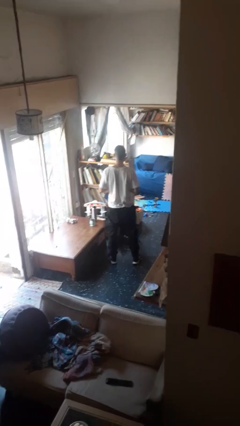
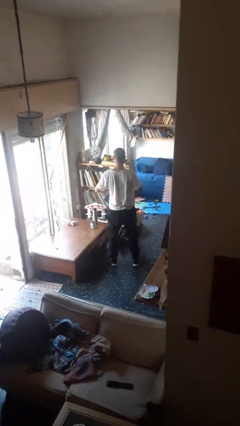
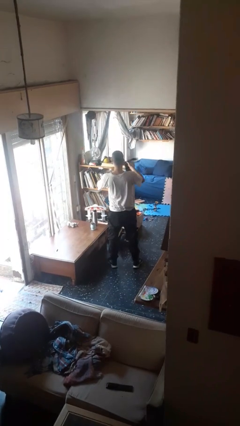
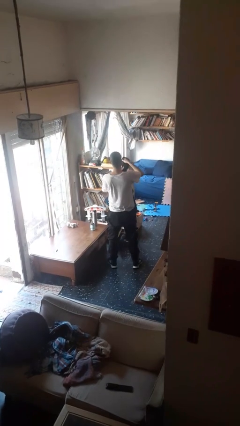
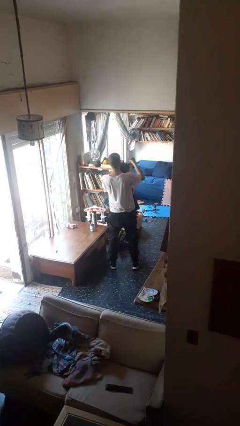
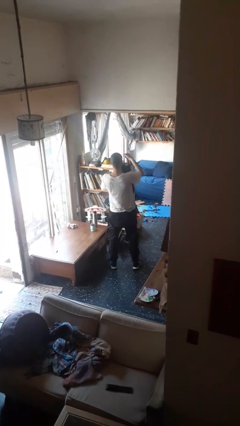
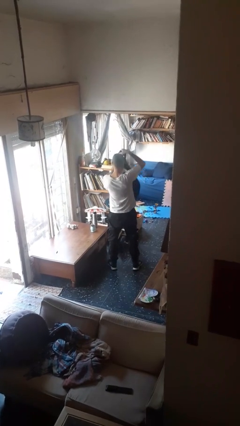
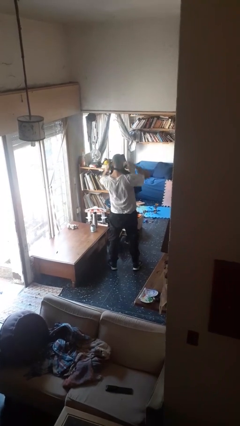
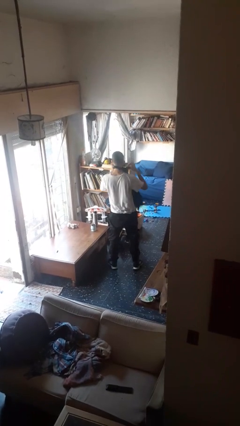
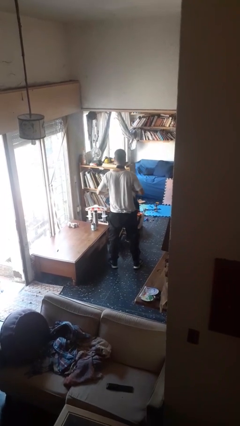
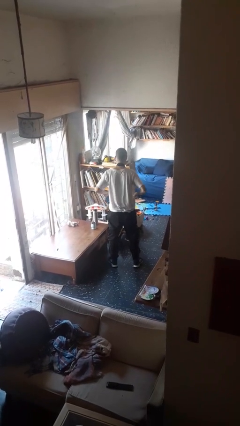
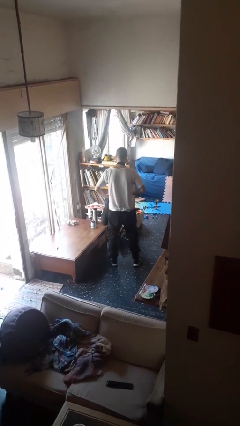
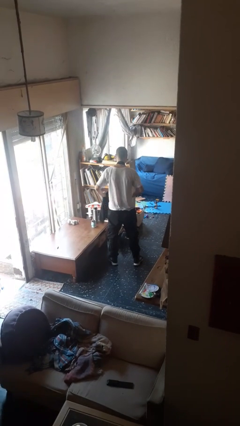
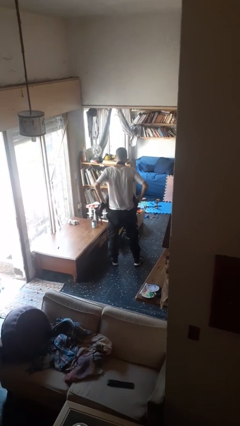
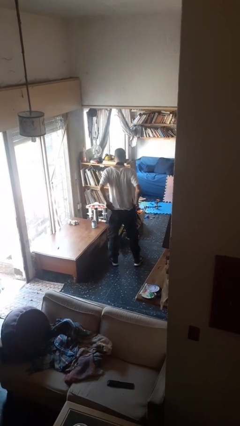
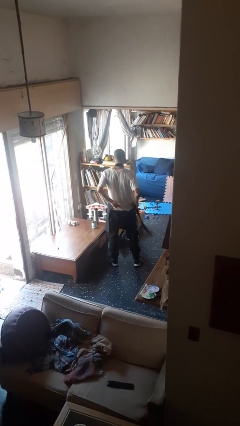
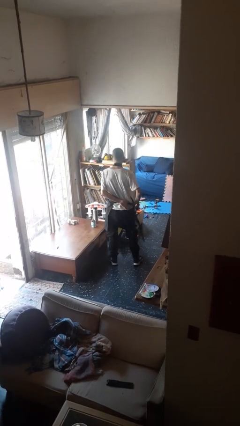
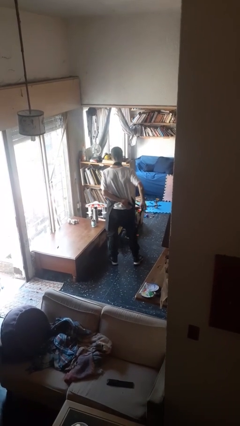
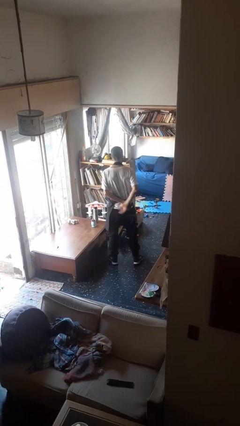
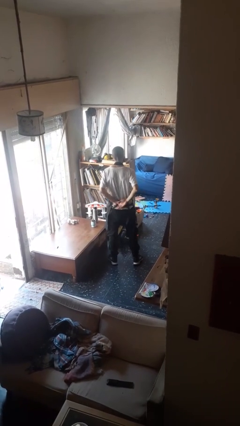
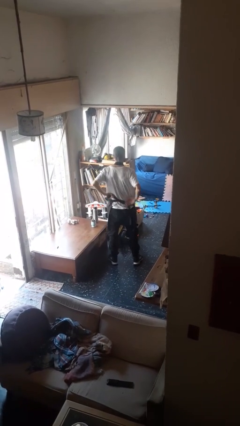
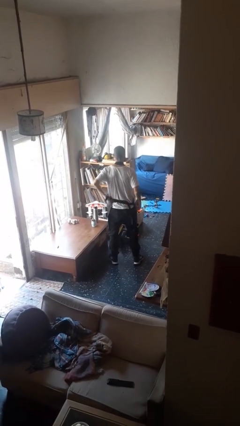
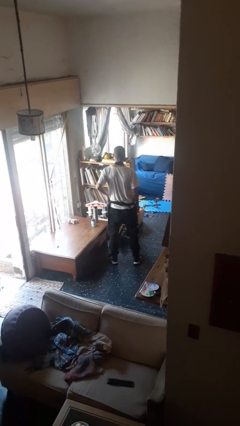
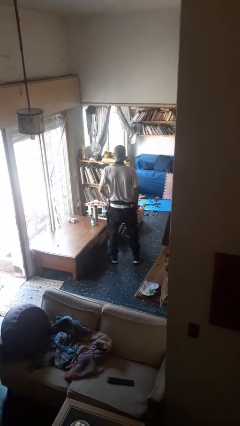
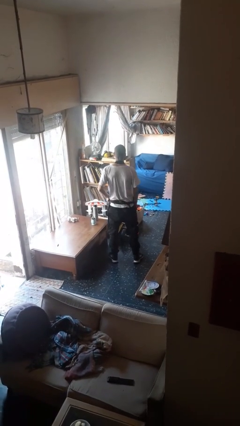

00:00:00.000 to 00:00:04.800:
person puts on apron

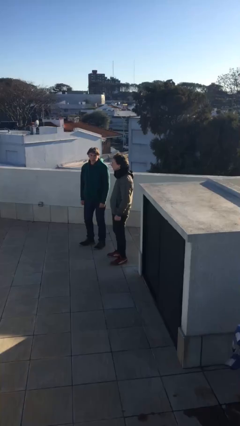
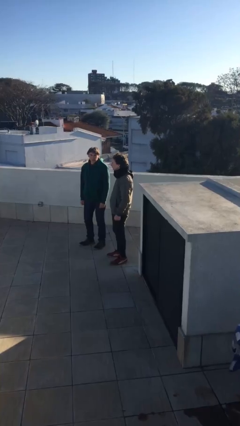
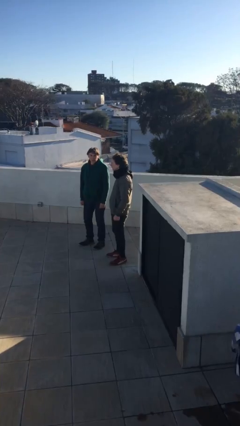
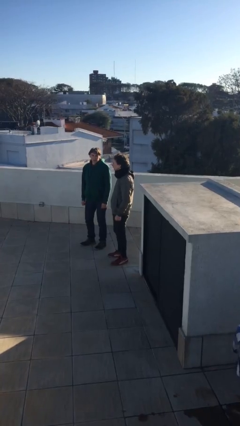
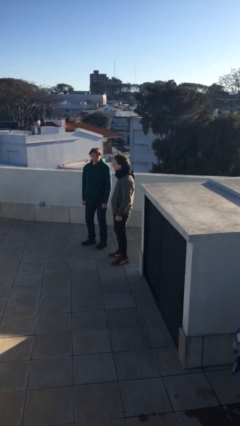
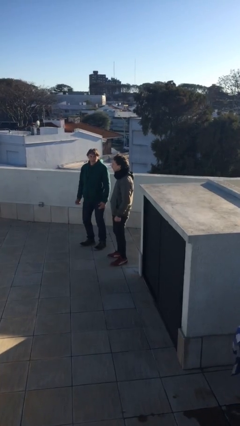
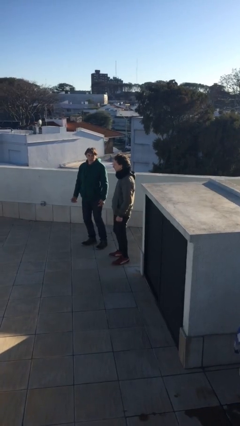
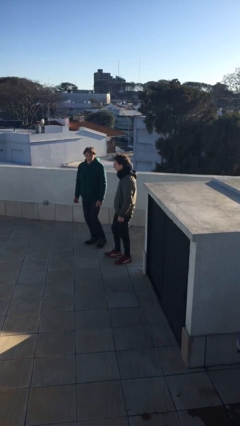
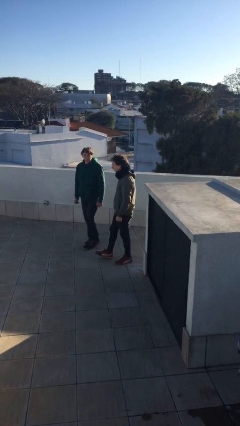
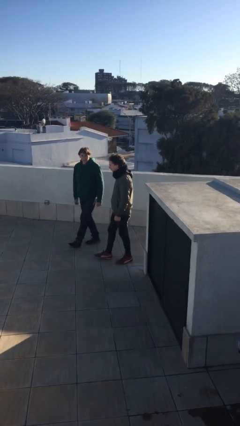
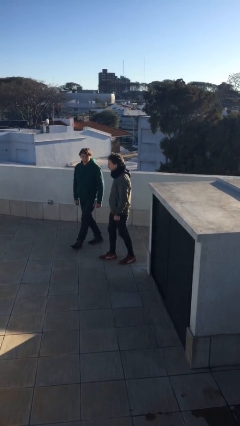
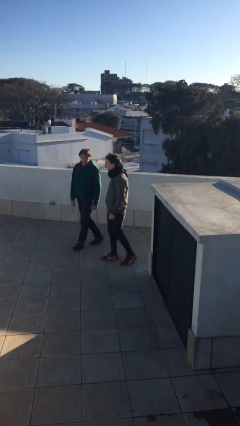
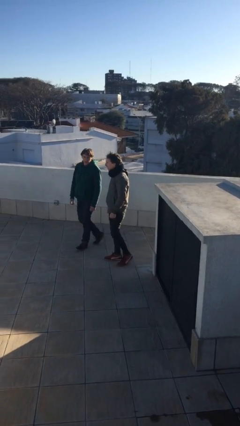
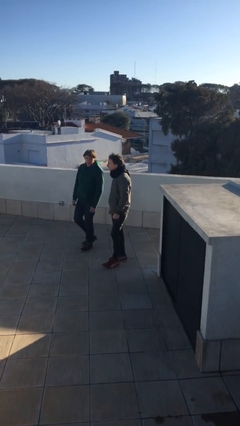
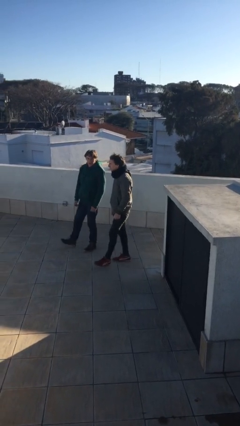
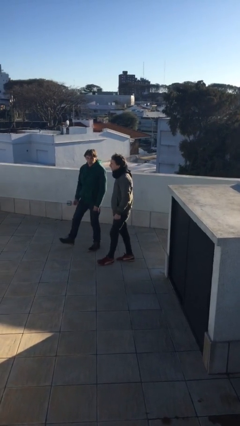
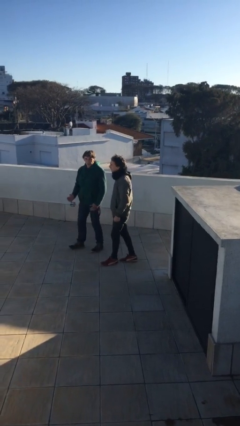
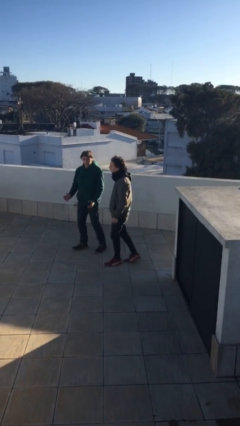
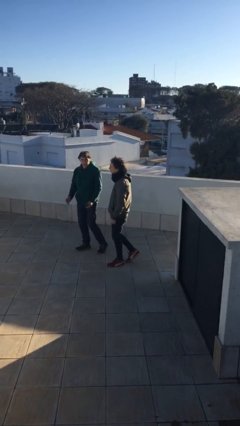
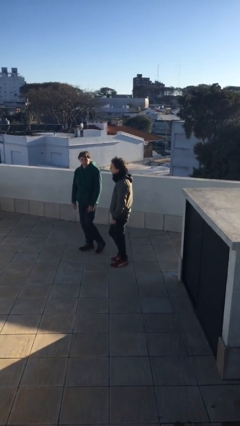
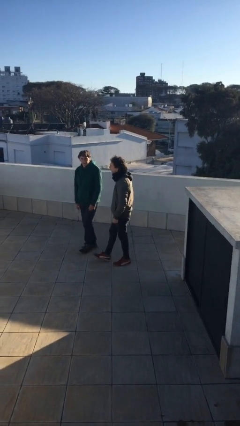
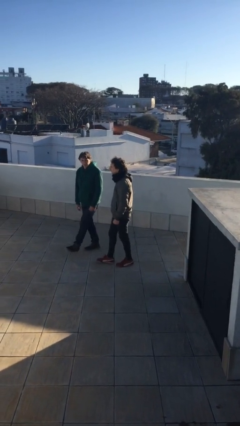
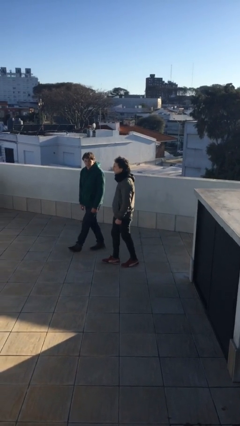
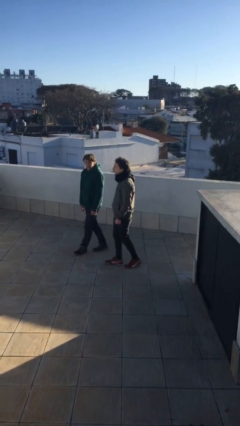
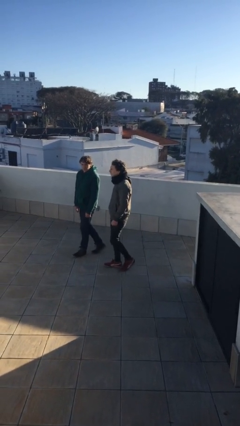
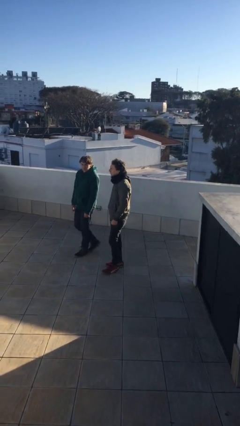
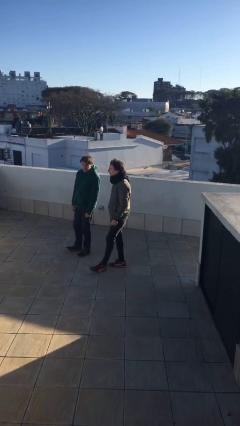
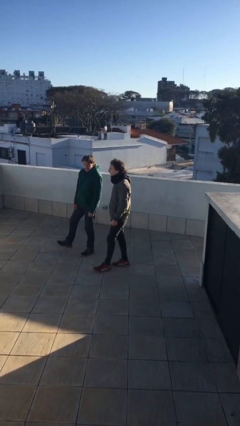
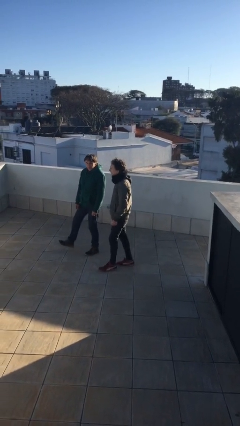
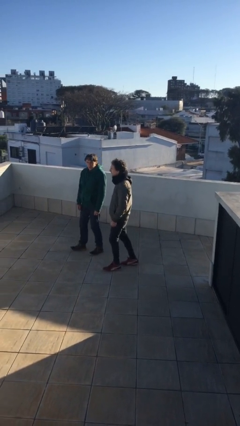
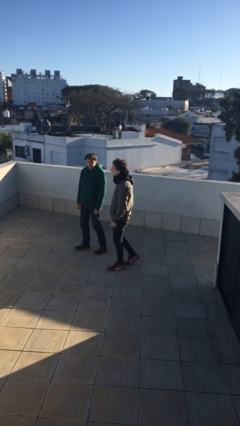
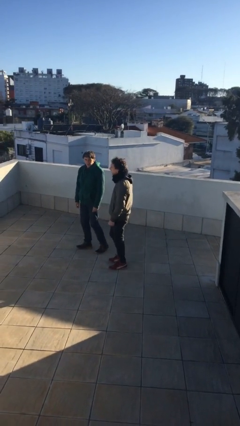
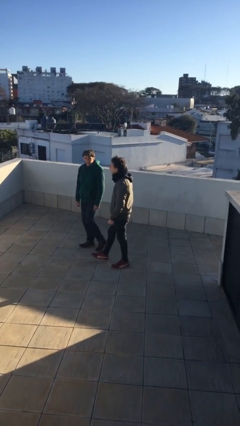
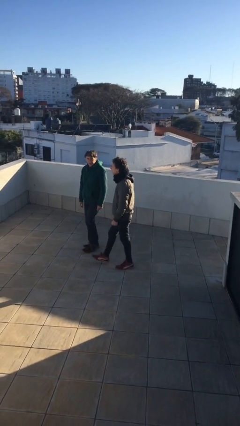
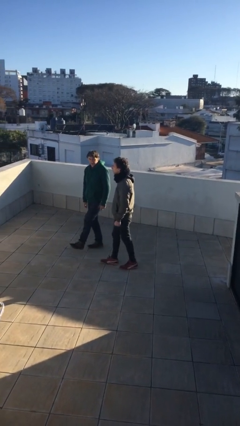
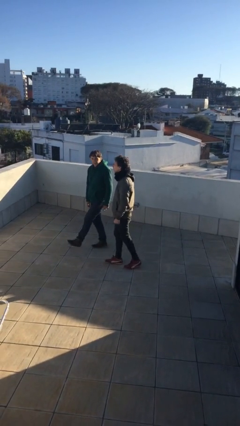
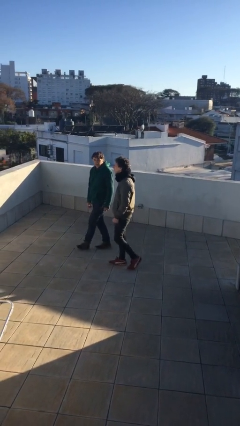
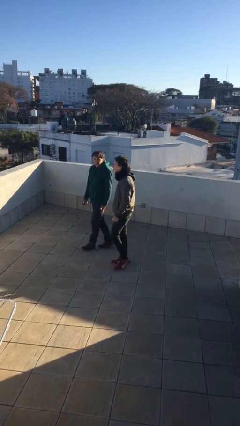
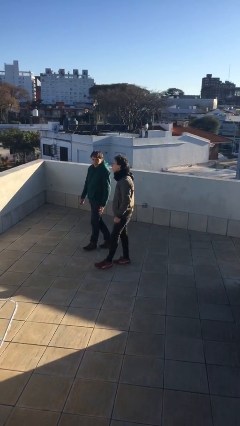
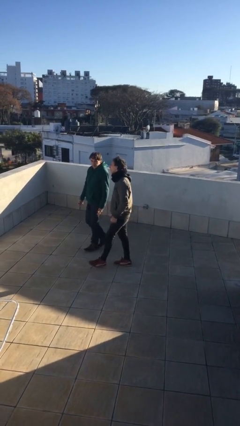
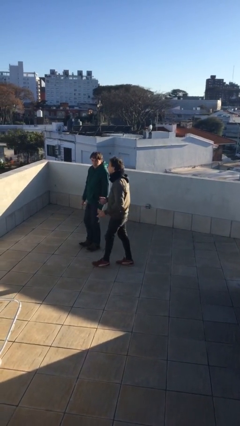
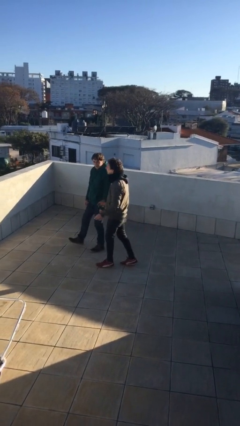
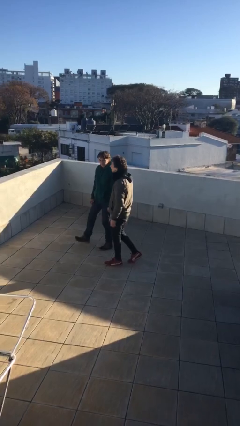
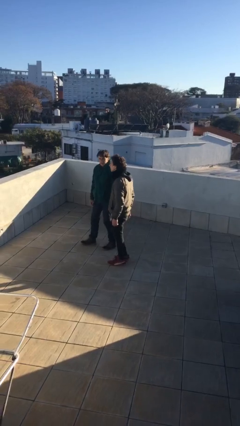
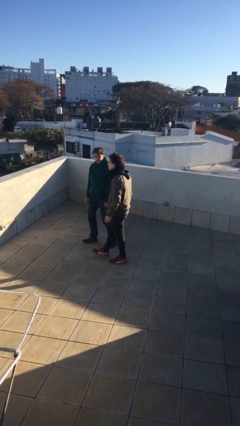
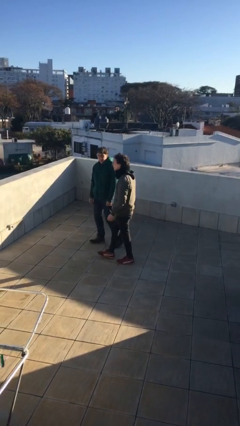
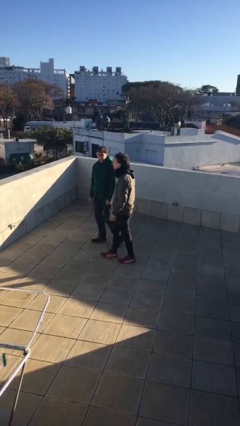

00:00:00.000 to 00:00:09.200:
person talks to person

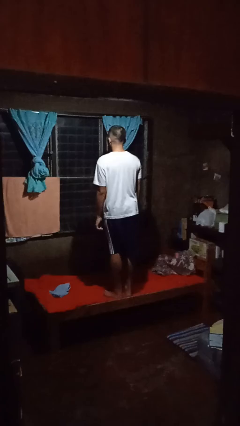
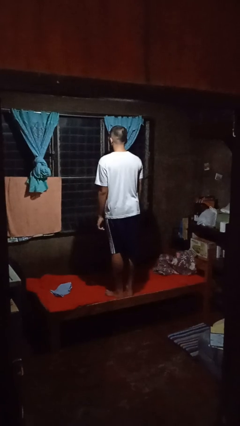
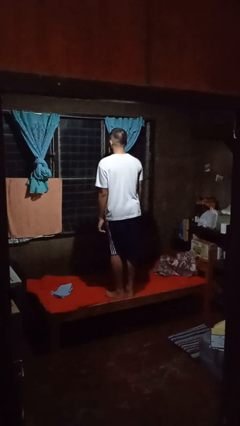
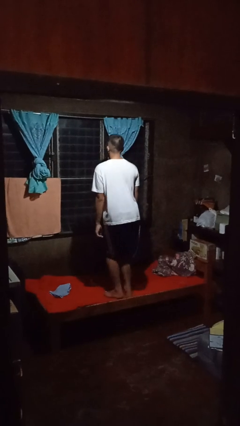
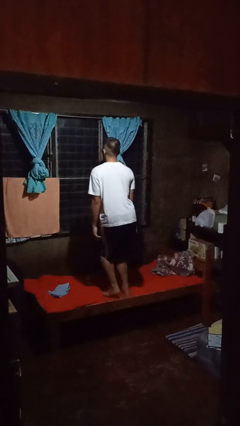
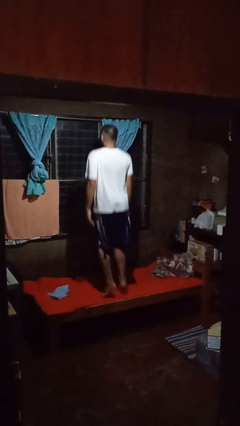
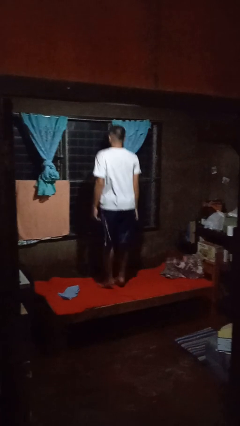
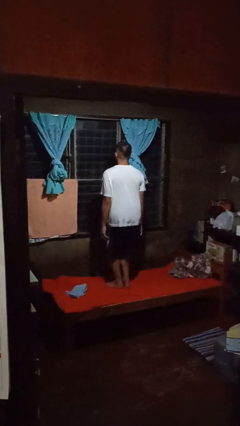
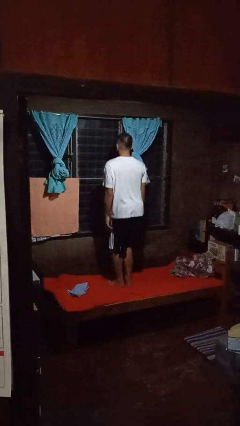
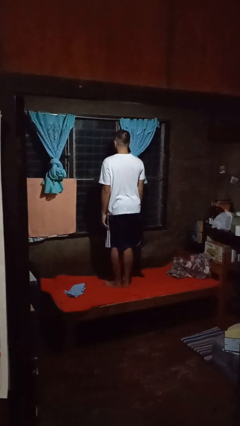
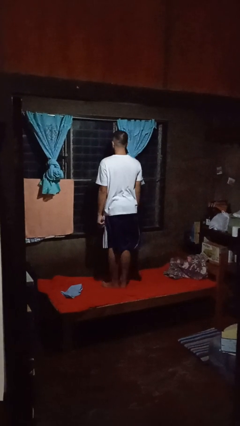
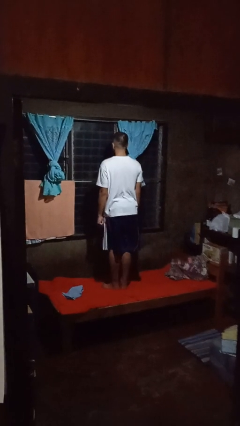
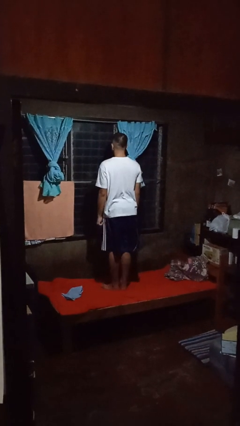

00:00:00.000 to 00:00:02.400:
person jumps on bed

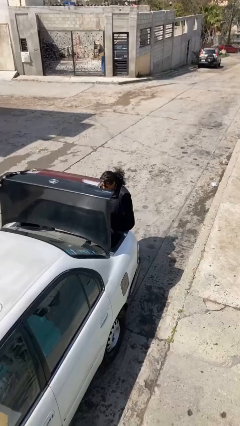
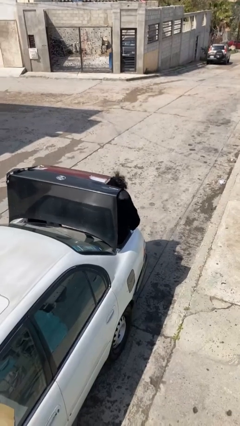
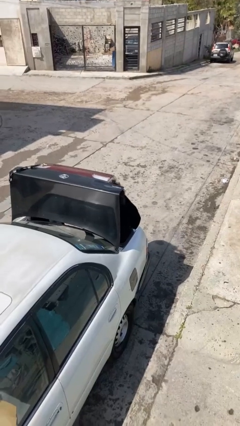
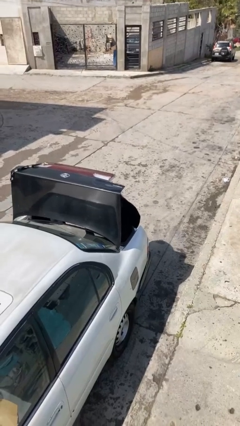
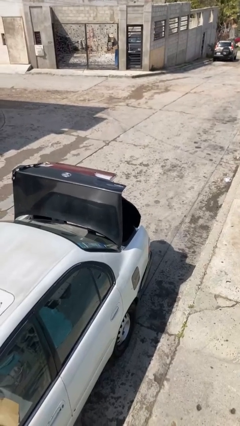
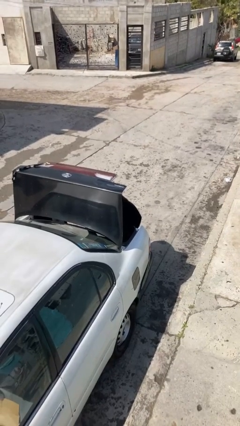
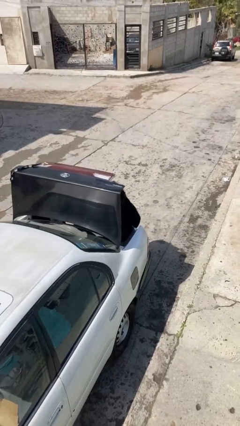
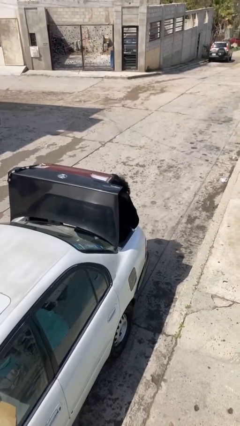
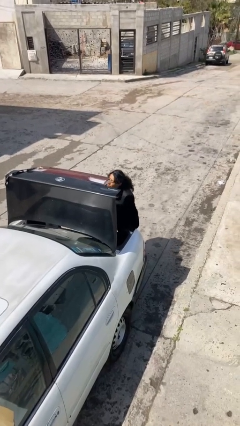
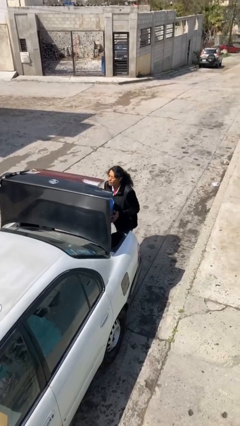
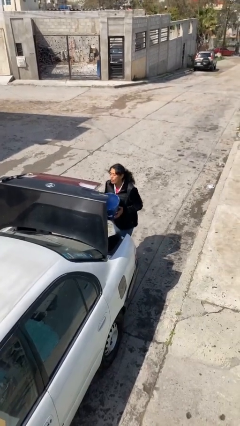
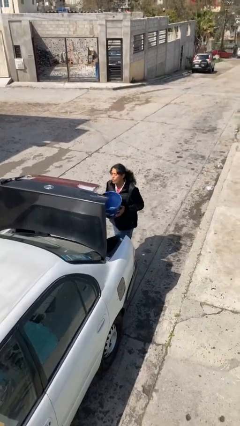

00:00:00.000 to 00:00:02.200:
person unloads car
